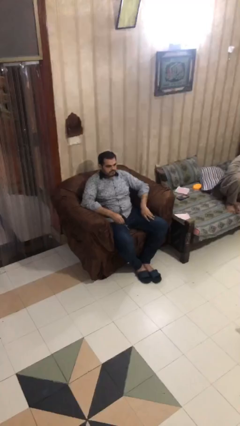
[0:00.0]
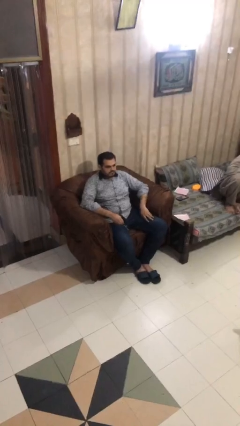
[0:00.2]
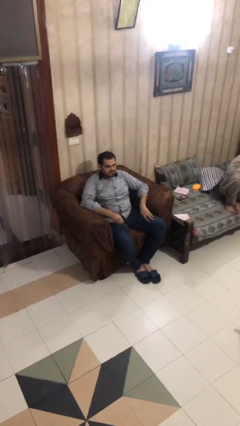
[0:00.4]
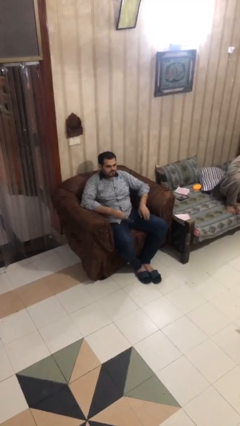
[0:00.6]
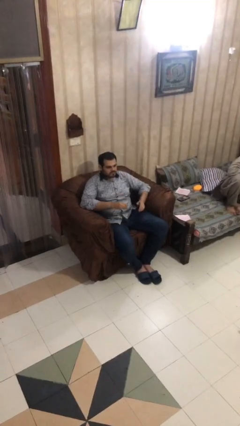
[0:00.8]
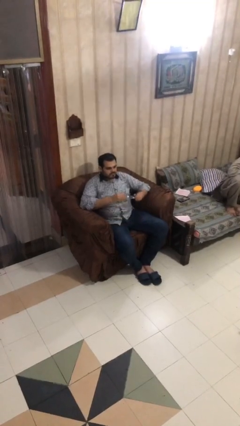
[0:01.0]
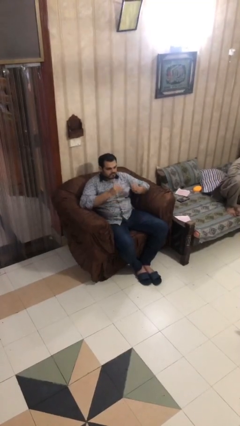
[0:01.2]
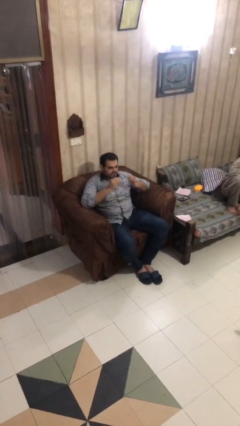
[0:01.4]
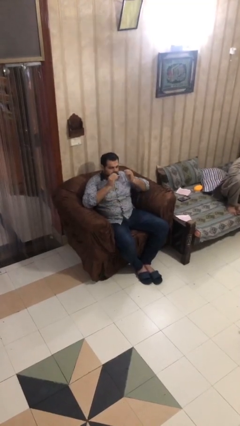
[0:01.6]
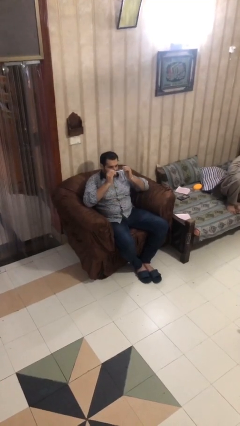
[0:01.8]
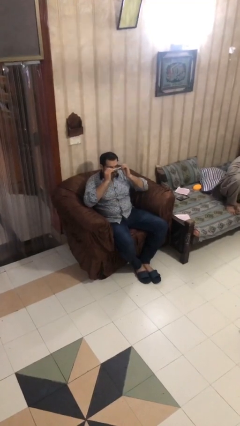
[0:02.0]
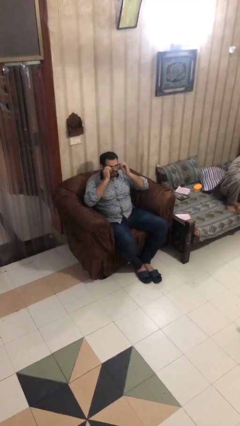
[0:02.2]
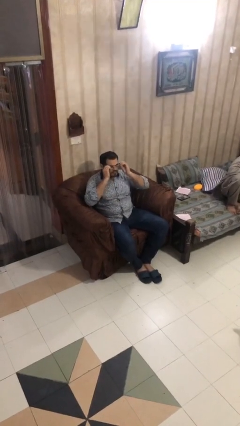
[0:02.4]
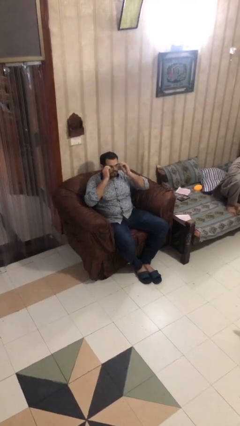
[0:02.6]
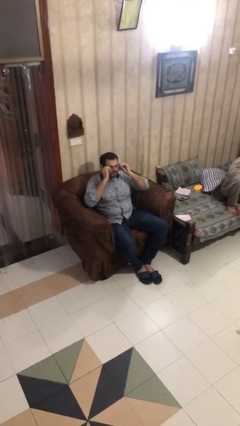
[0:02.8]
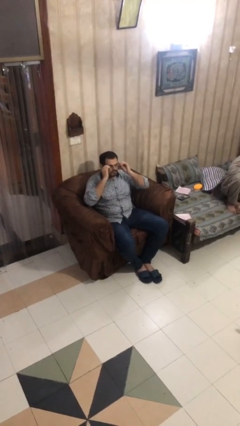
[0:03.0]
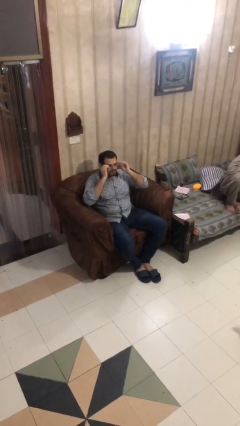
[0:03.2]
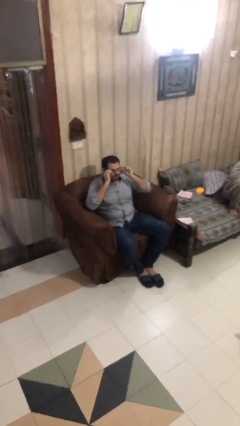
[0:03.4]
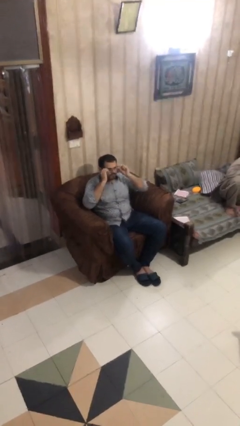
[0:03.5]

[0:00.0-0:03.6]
person puts on glasses

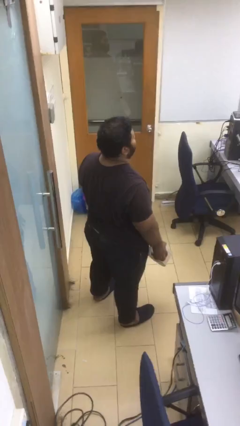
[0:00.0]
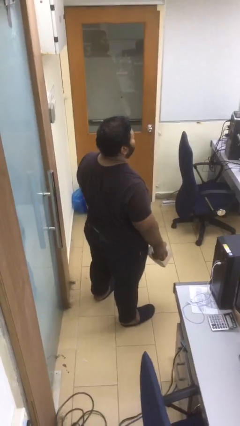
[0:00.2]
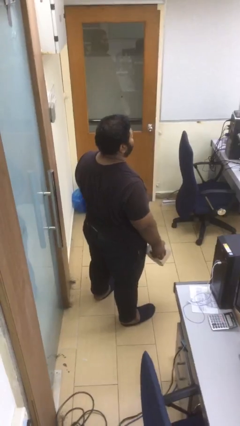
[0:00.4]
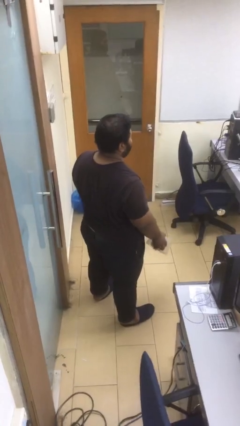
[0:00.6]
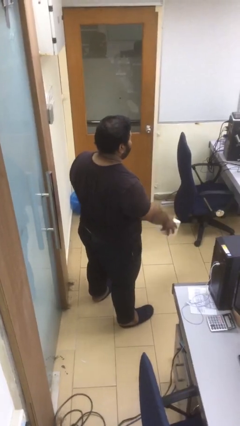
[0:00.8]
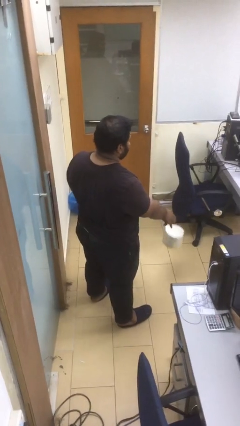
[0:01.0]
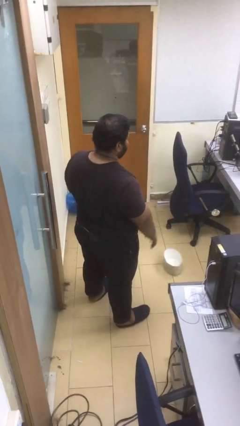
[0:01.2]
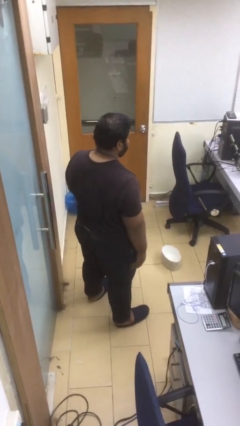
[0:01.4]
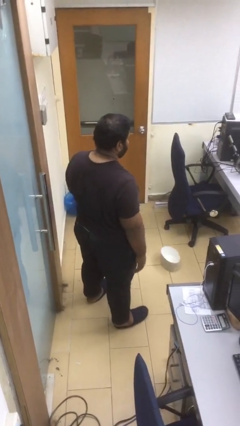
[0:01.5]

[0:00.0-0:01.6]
person throws object to ground

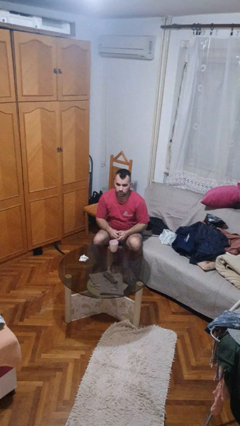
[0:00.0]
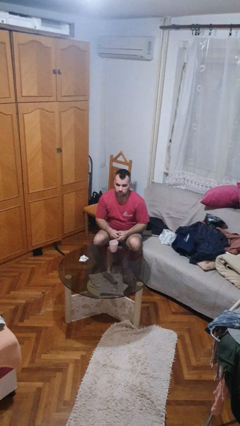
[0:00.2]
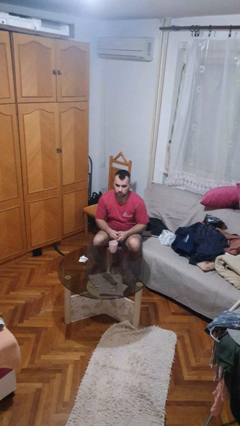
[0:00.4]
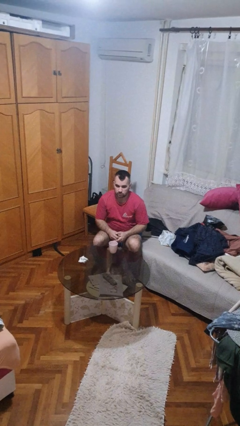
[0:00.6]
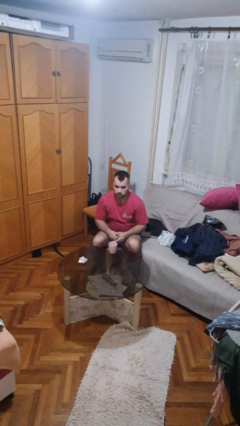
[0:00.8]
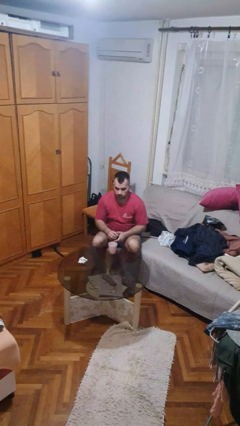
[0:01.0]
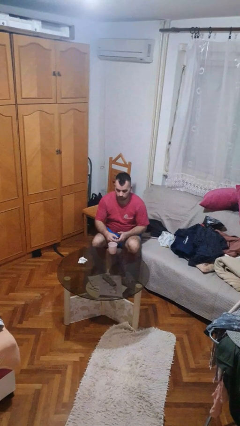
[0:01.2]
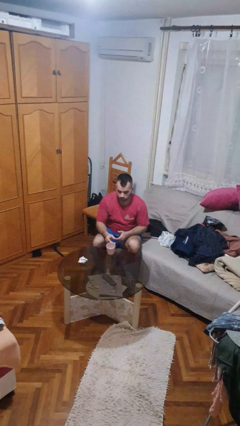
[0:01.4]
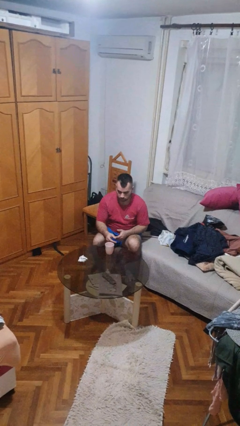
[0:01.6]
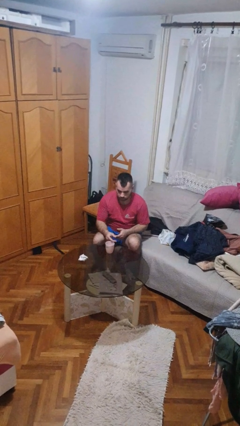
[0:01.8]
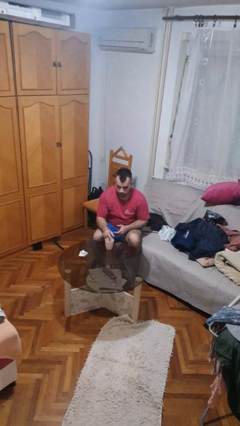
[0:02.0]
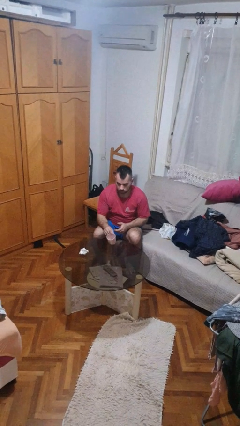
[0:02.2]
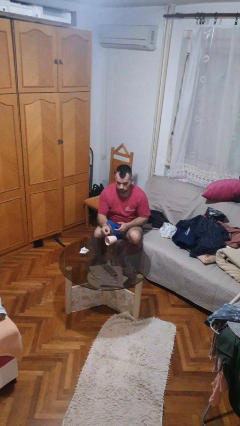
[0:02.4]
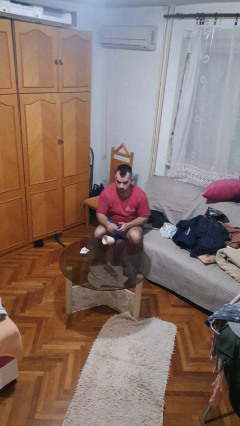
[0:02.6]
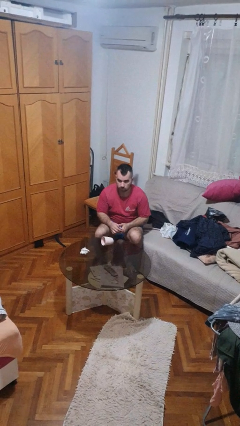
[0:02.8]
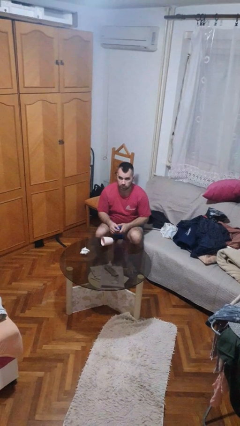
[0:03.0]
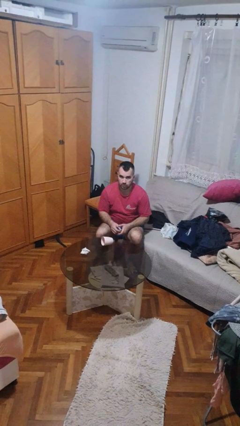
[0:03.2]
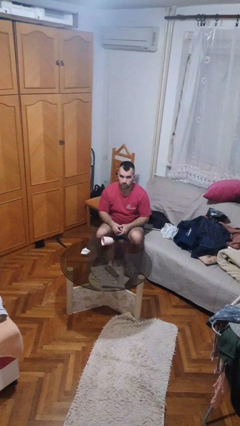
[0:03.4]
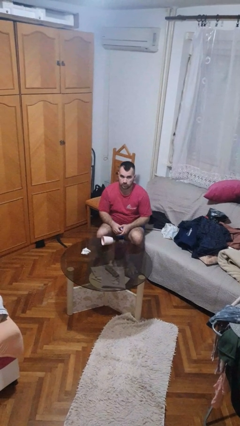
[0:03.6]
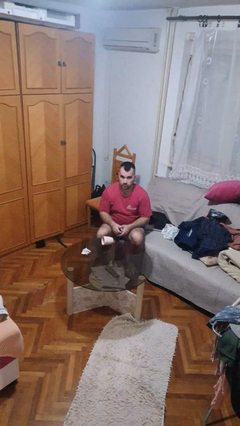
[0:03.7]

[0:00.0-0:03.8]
person knocks over glass

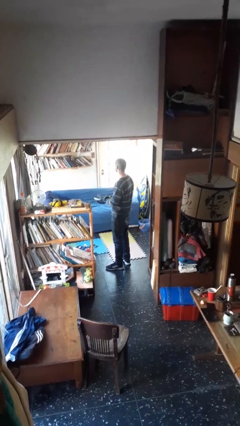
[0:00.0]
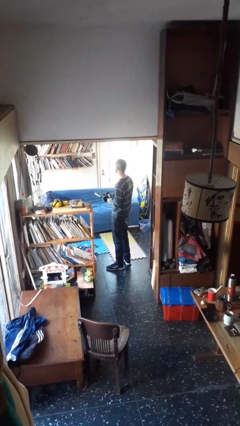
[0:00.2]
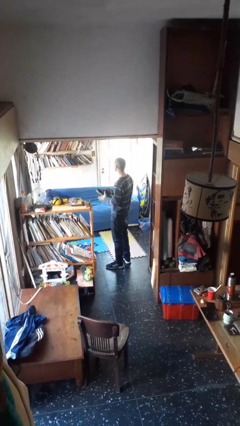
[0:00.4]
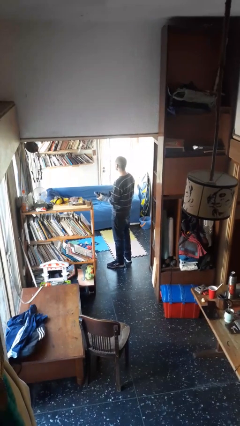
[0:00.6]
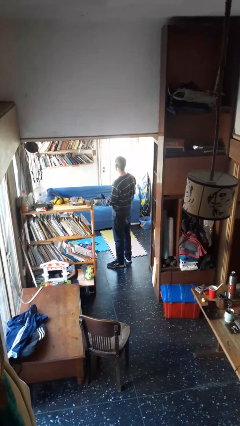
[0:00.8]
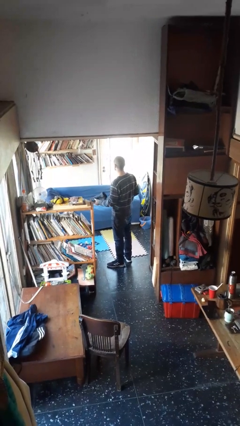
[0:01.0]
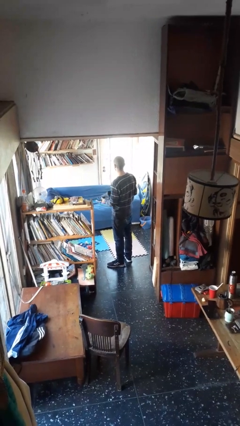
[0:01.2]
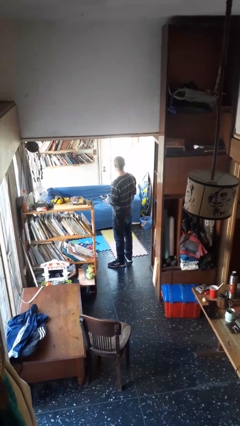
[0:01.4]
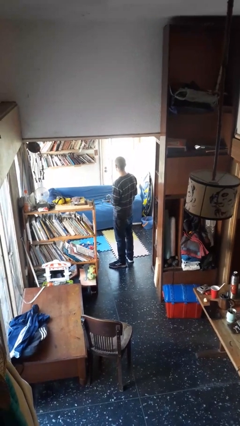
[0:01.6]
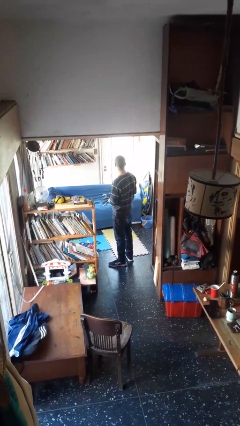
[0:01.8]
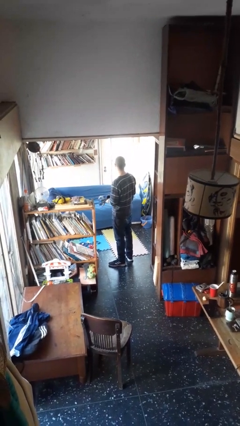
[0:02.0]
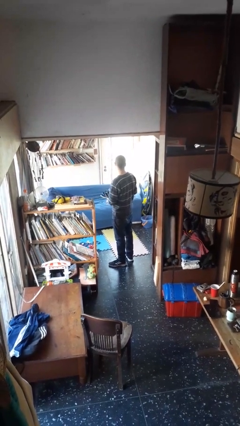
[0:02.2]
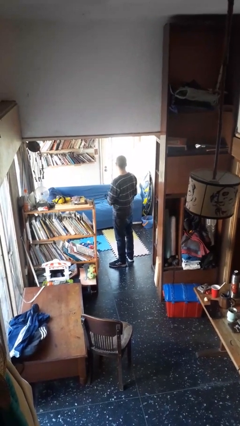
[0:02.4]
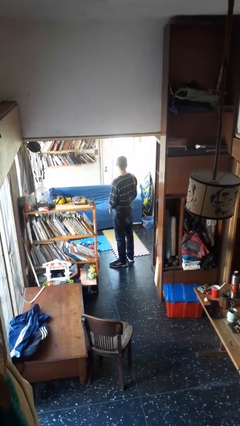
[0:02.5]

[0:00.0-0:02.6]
person takes off gloves

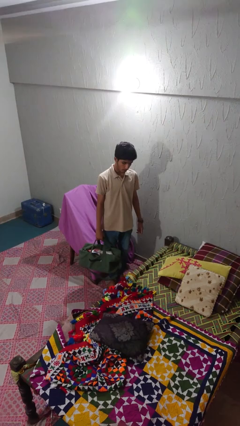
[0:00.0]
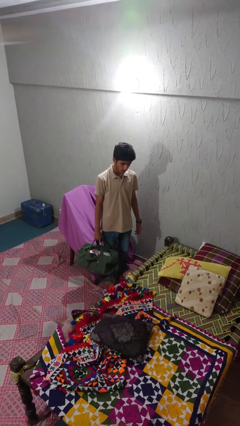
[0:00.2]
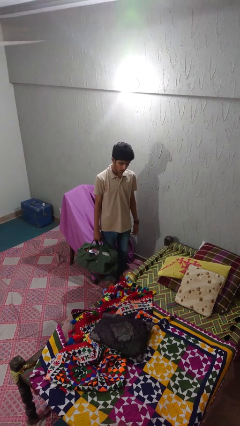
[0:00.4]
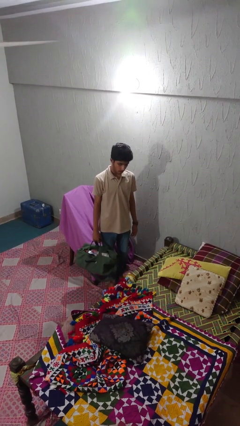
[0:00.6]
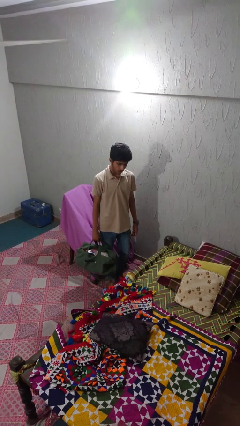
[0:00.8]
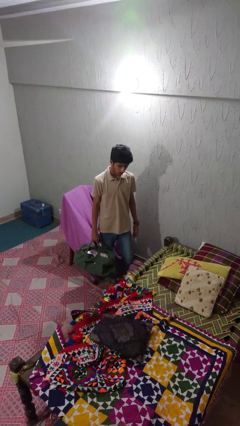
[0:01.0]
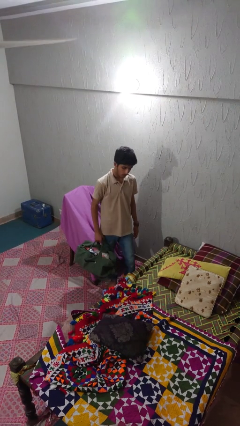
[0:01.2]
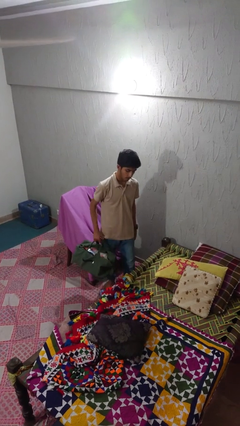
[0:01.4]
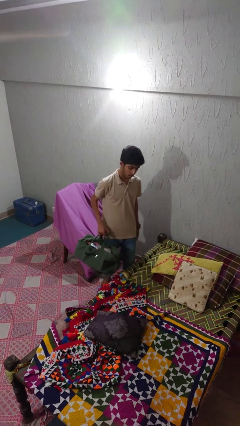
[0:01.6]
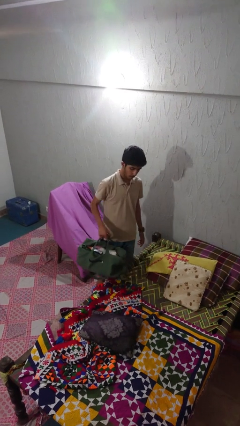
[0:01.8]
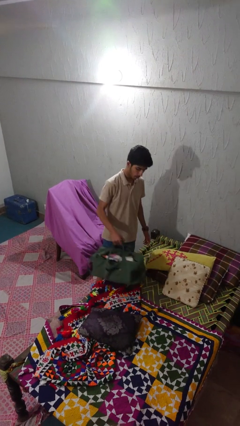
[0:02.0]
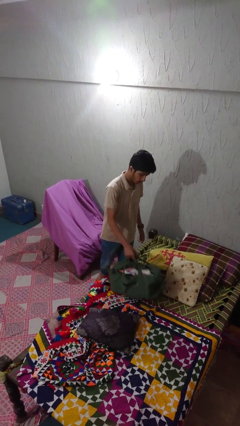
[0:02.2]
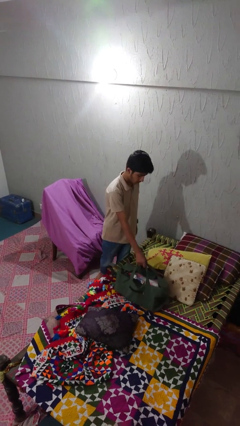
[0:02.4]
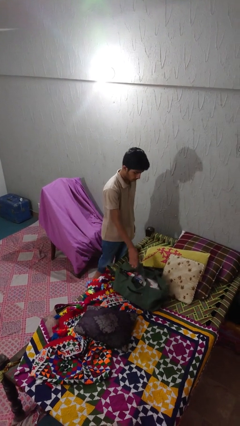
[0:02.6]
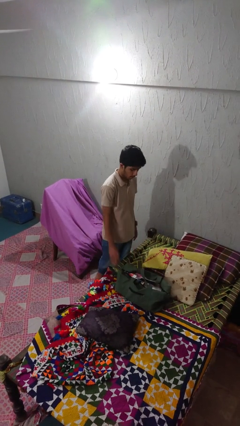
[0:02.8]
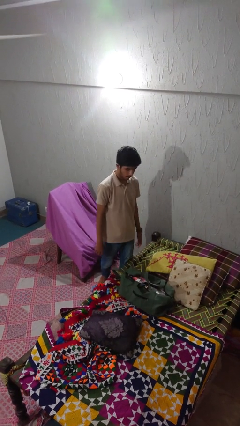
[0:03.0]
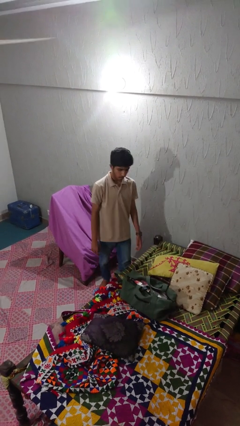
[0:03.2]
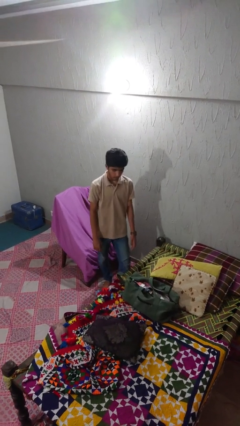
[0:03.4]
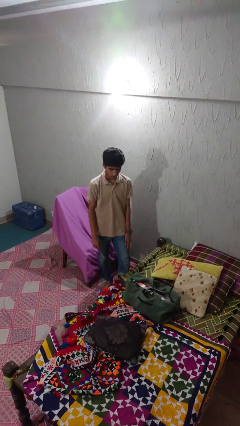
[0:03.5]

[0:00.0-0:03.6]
person puts down object on bed

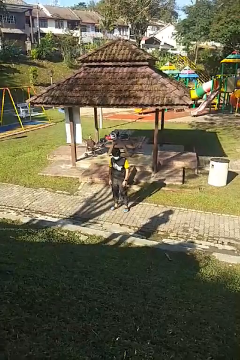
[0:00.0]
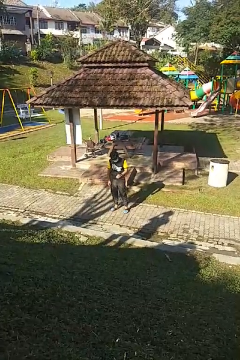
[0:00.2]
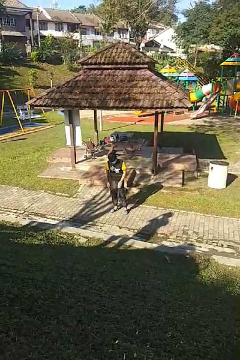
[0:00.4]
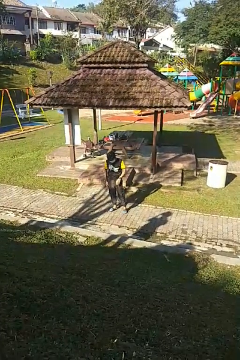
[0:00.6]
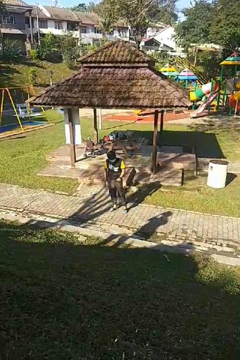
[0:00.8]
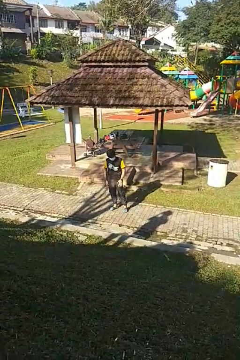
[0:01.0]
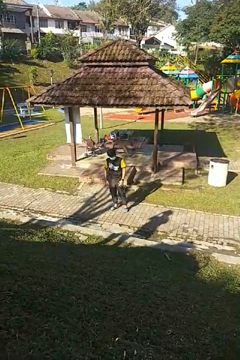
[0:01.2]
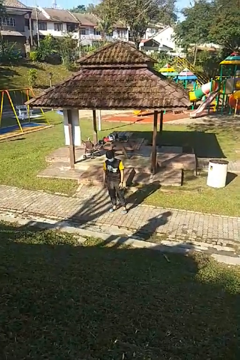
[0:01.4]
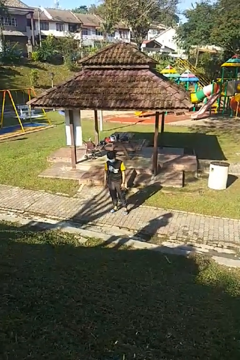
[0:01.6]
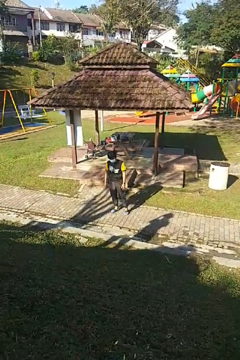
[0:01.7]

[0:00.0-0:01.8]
person slaps hands on thighs

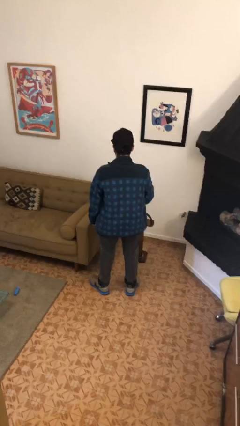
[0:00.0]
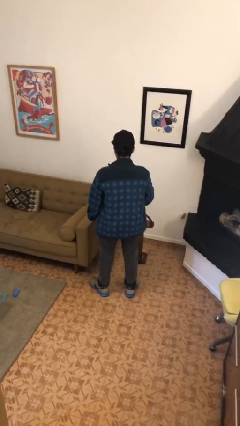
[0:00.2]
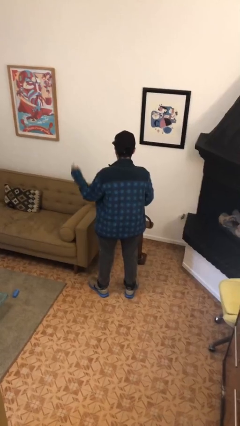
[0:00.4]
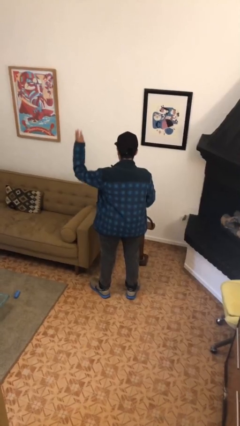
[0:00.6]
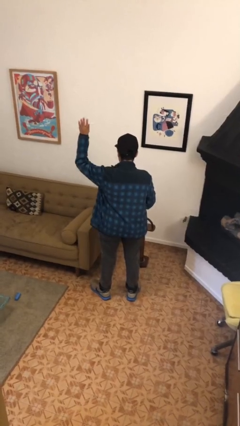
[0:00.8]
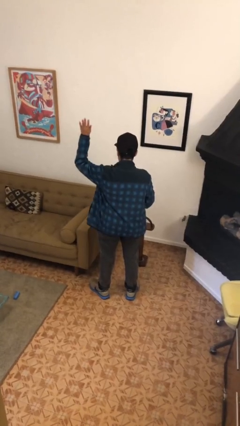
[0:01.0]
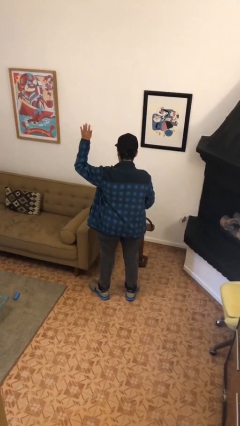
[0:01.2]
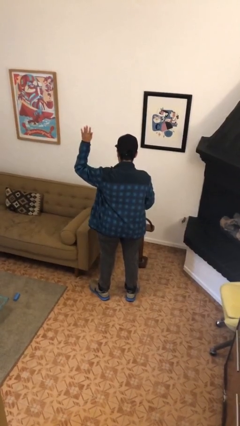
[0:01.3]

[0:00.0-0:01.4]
person gestures raise hand
